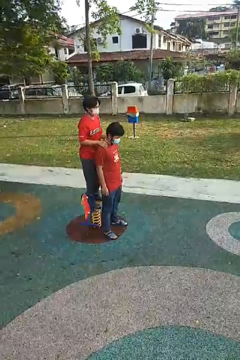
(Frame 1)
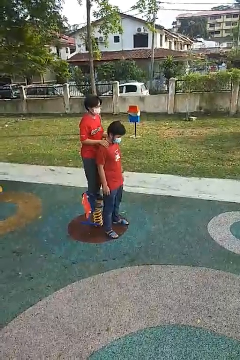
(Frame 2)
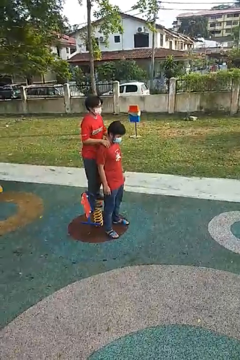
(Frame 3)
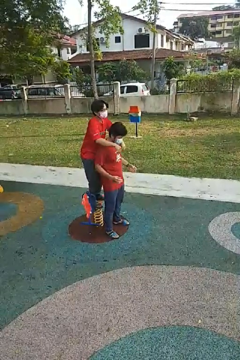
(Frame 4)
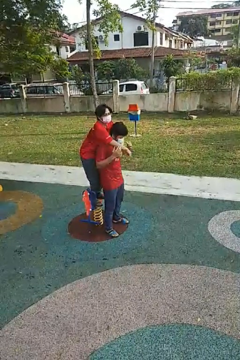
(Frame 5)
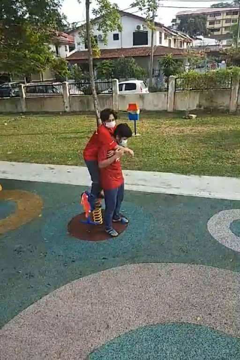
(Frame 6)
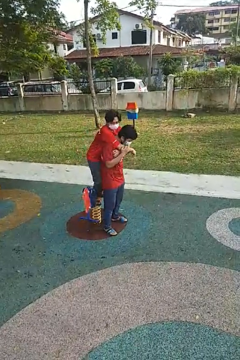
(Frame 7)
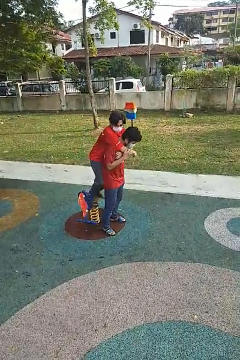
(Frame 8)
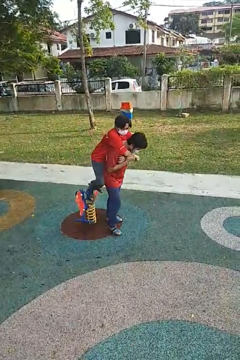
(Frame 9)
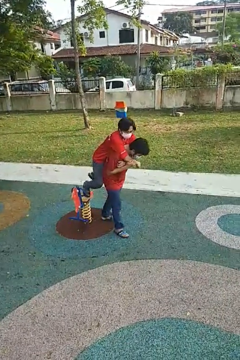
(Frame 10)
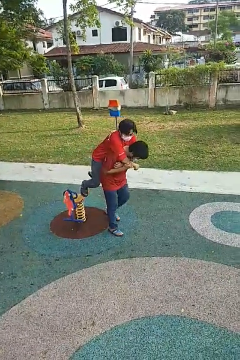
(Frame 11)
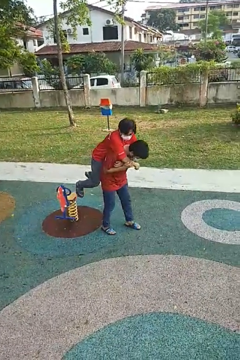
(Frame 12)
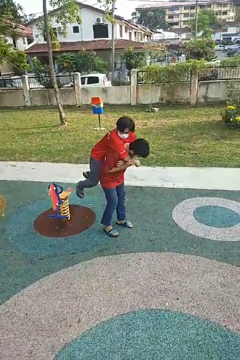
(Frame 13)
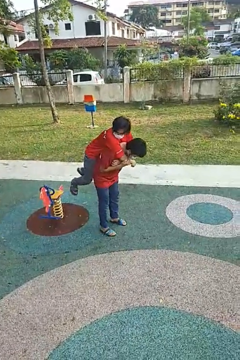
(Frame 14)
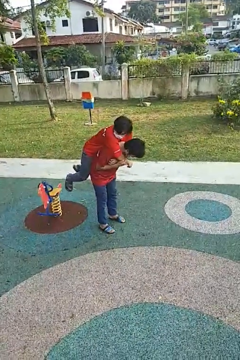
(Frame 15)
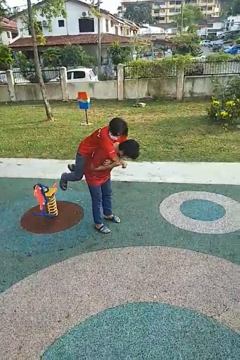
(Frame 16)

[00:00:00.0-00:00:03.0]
person carries person over shoulder

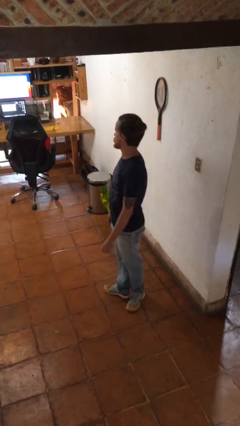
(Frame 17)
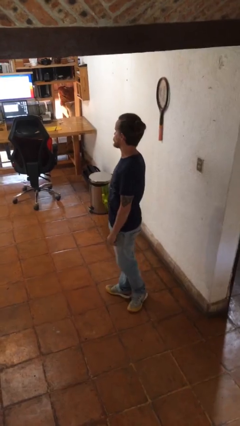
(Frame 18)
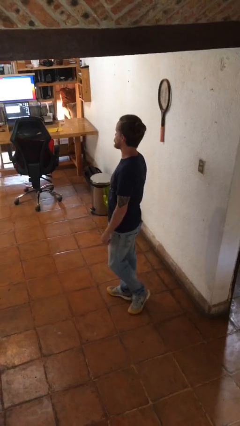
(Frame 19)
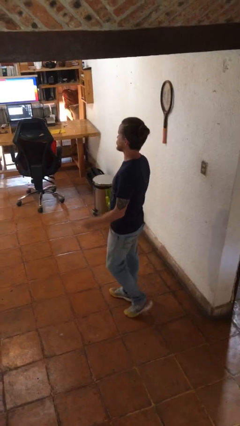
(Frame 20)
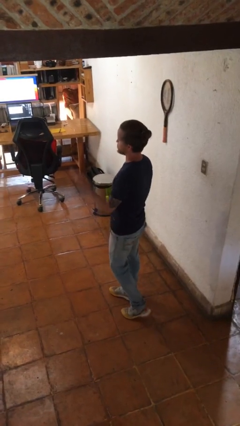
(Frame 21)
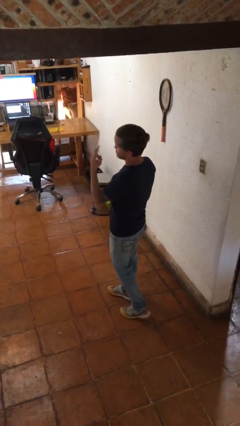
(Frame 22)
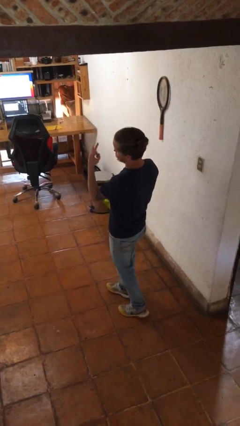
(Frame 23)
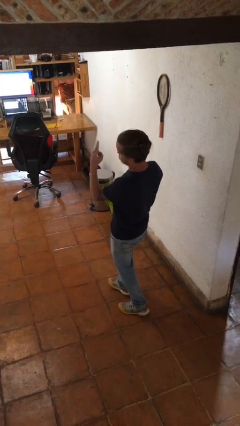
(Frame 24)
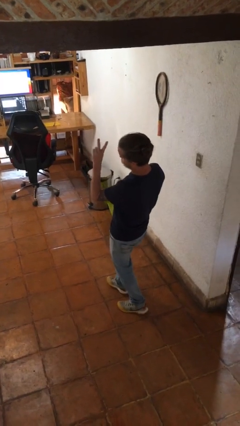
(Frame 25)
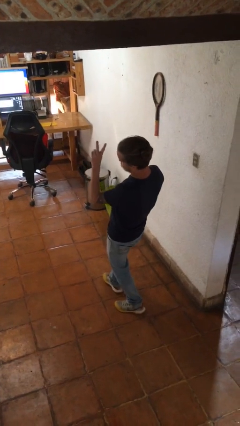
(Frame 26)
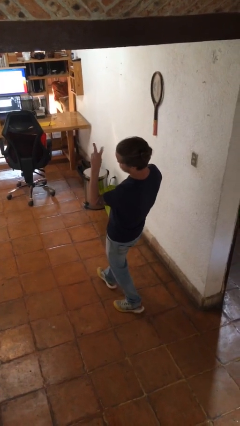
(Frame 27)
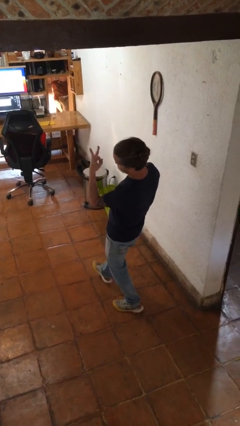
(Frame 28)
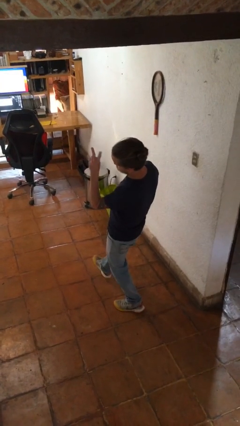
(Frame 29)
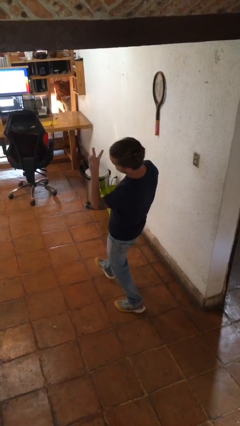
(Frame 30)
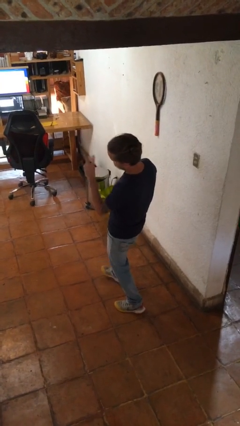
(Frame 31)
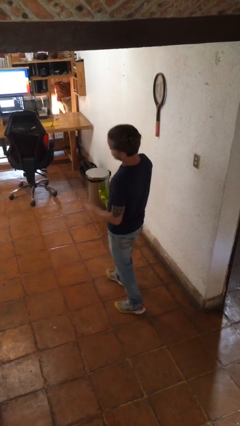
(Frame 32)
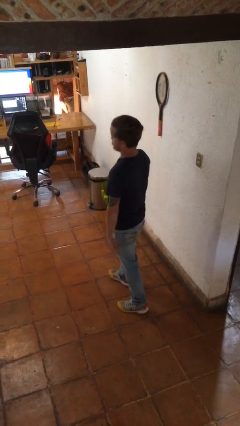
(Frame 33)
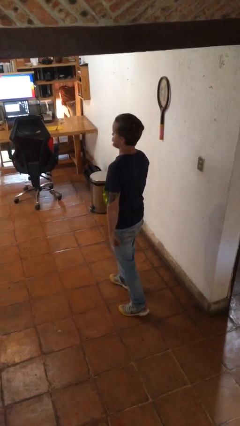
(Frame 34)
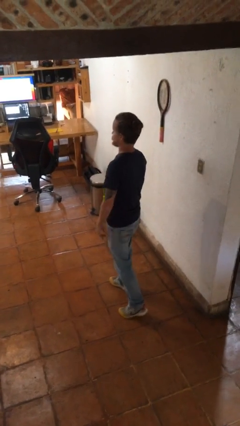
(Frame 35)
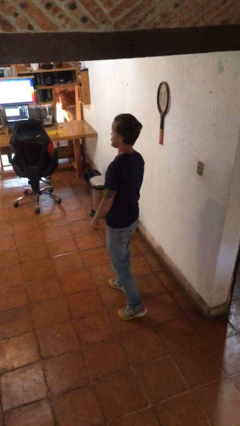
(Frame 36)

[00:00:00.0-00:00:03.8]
person gestures peace

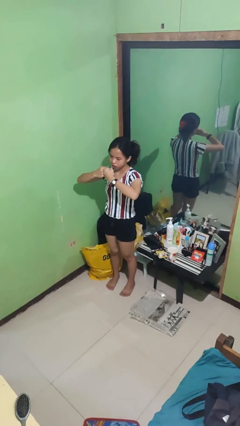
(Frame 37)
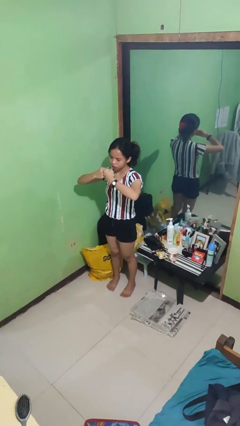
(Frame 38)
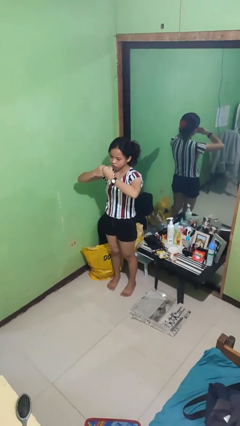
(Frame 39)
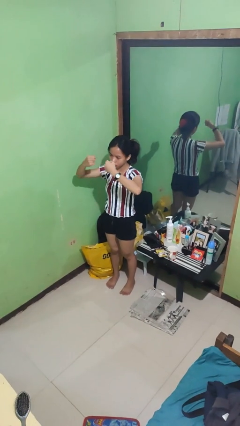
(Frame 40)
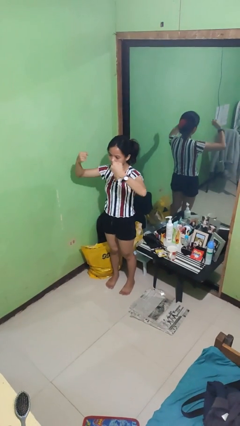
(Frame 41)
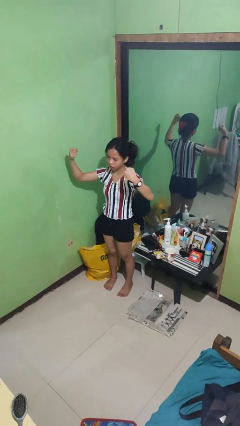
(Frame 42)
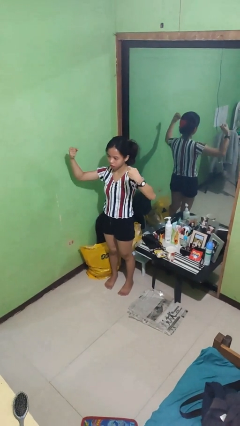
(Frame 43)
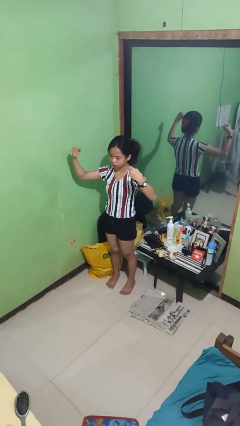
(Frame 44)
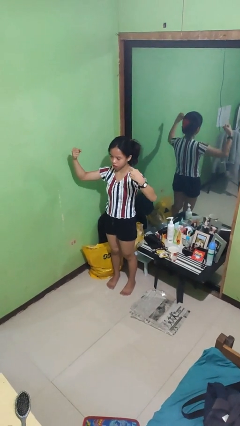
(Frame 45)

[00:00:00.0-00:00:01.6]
person gestures zoom in

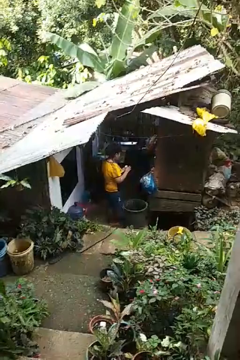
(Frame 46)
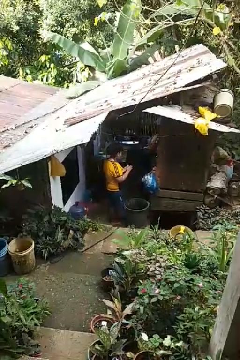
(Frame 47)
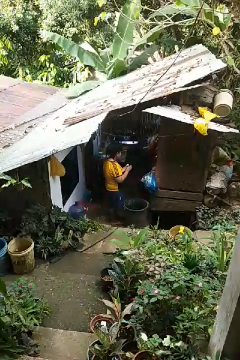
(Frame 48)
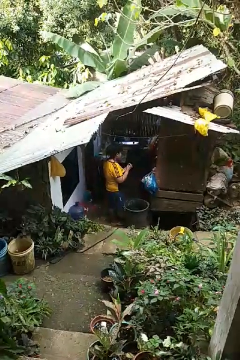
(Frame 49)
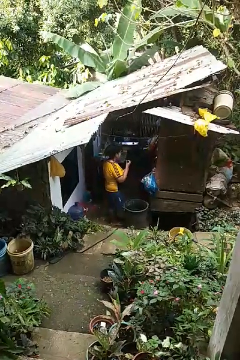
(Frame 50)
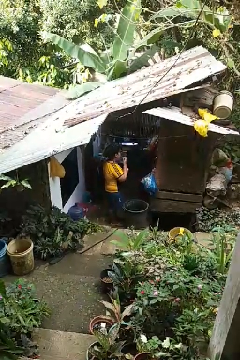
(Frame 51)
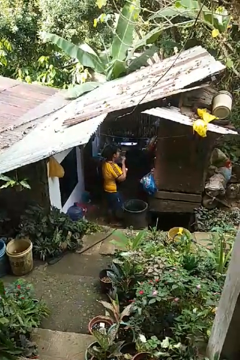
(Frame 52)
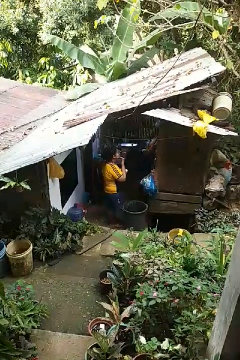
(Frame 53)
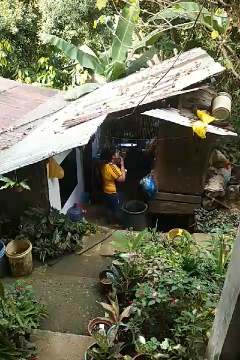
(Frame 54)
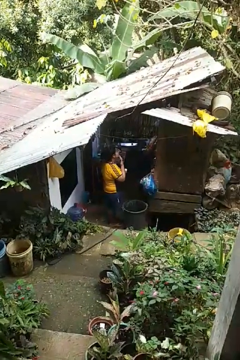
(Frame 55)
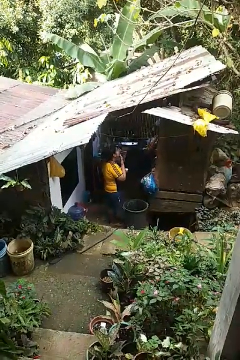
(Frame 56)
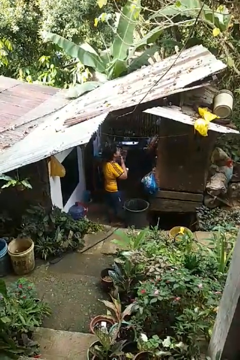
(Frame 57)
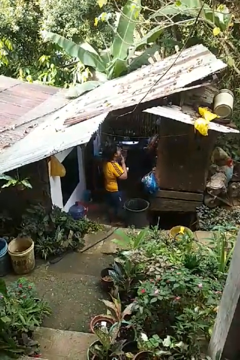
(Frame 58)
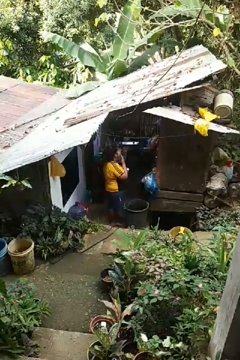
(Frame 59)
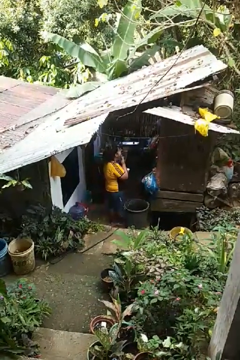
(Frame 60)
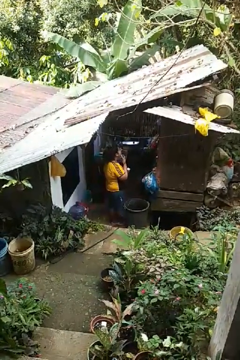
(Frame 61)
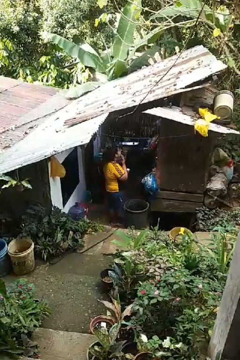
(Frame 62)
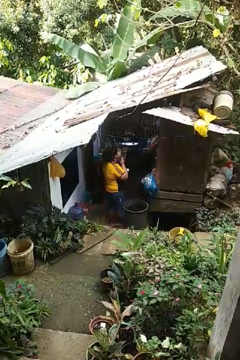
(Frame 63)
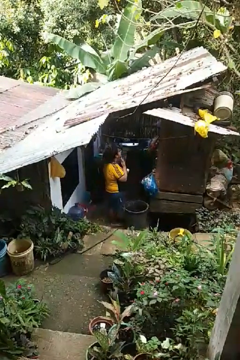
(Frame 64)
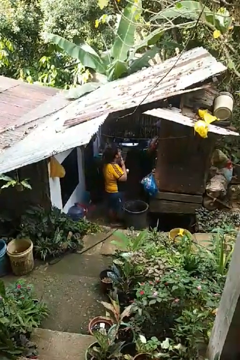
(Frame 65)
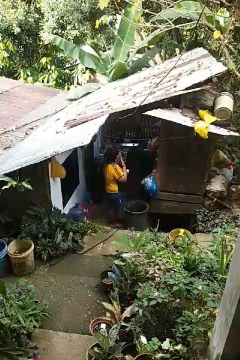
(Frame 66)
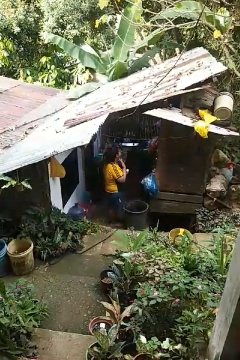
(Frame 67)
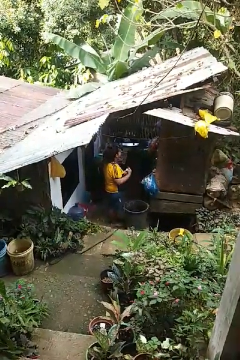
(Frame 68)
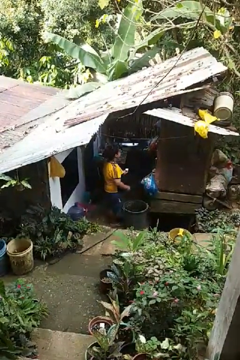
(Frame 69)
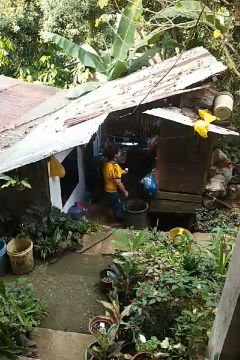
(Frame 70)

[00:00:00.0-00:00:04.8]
person applies facial moisturizer

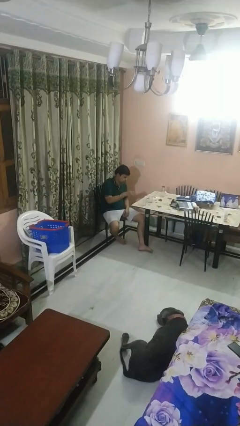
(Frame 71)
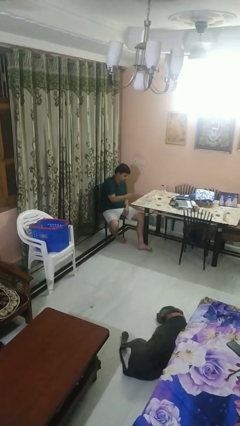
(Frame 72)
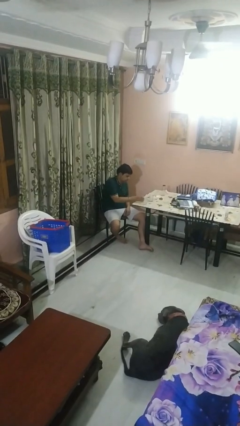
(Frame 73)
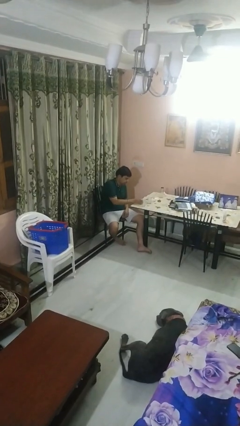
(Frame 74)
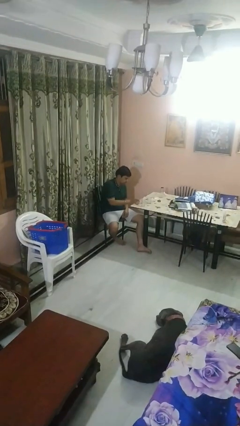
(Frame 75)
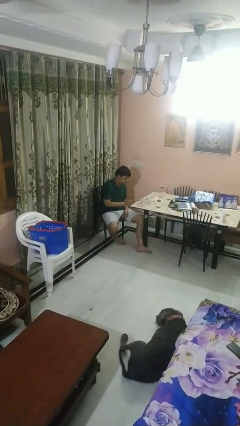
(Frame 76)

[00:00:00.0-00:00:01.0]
person puts down object on table

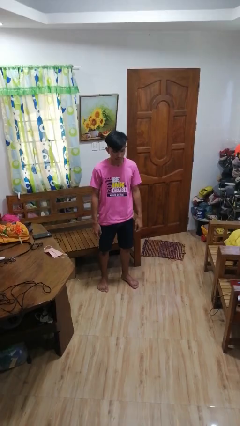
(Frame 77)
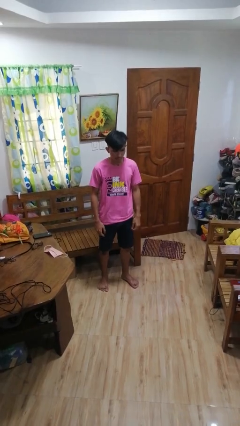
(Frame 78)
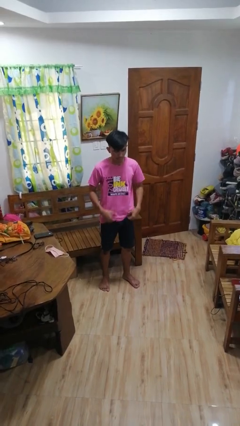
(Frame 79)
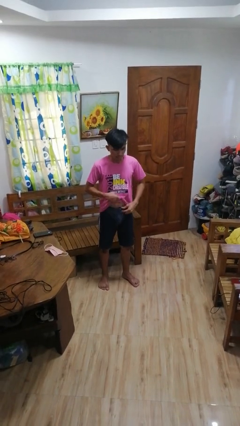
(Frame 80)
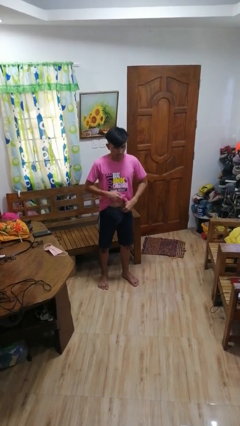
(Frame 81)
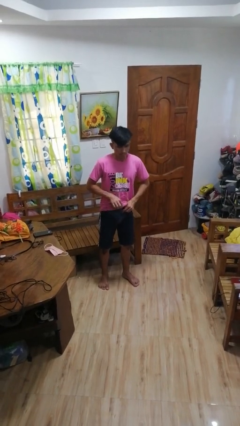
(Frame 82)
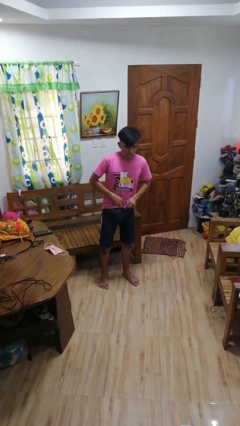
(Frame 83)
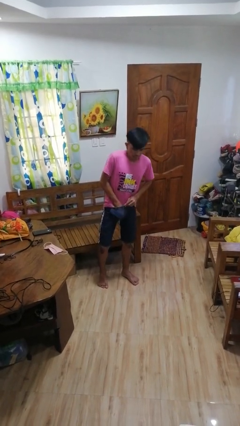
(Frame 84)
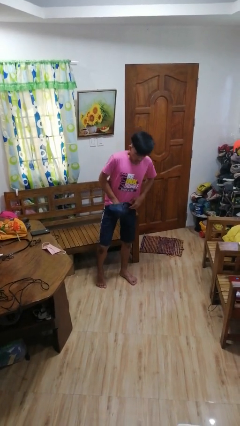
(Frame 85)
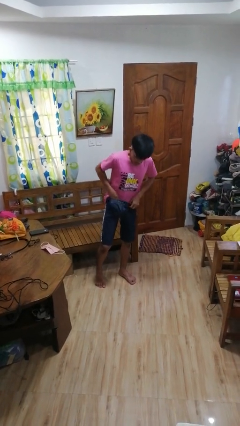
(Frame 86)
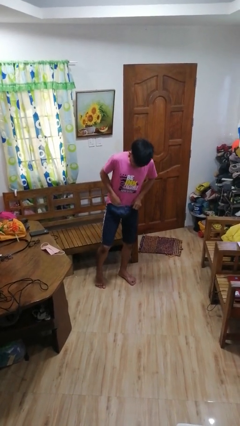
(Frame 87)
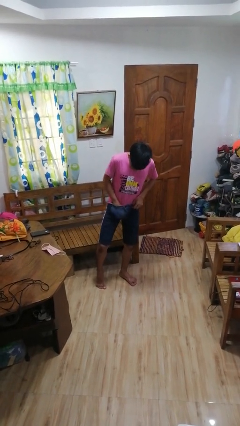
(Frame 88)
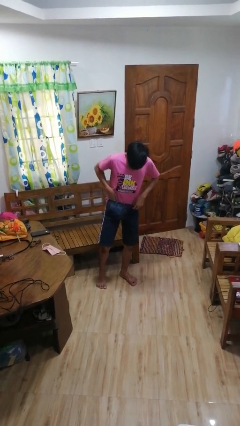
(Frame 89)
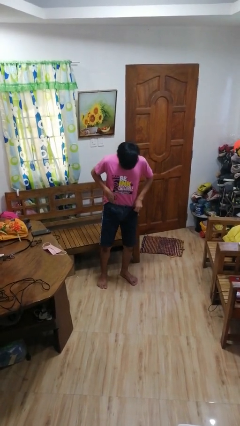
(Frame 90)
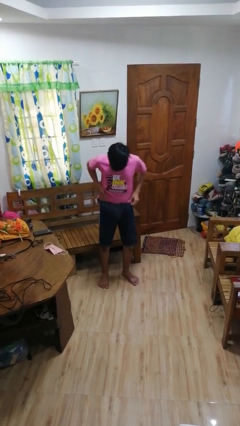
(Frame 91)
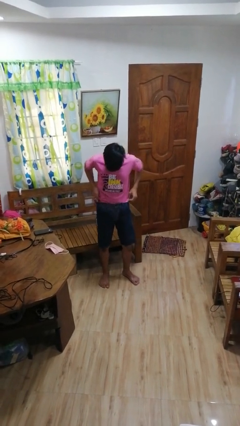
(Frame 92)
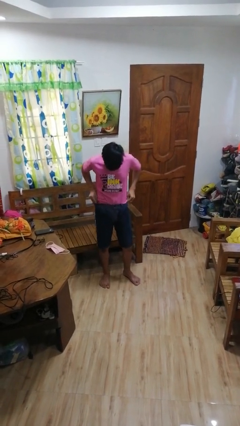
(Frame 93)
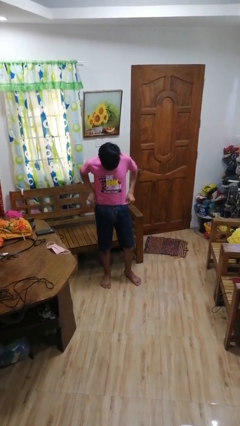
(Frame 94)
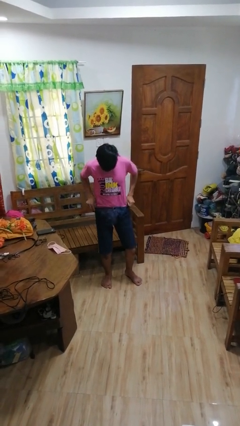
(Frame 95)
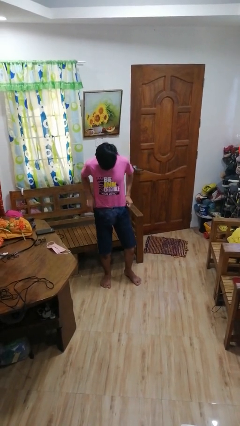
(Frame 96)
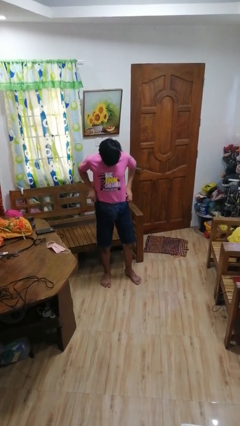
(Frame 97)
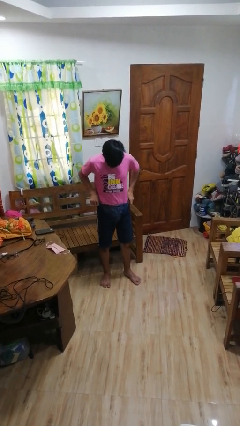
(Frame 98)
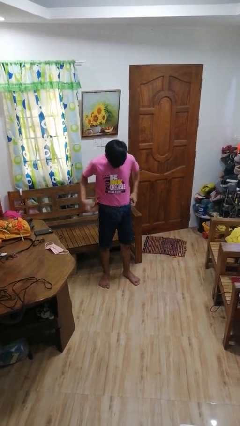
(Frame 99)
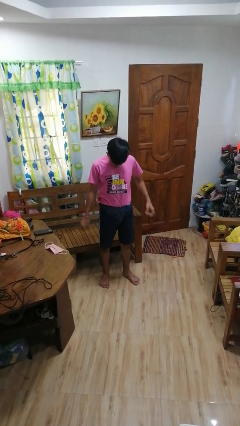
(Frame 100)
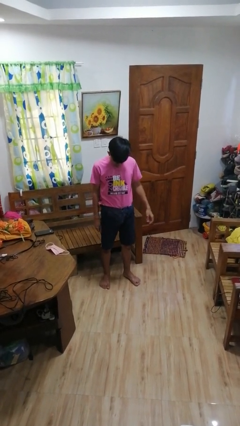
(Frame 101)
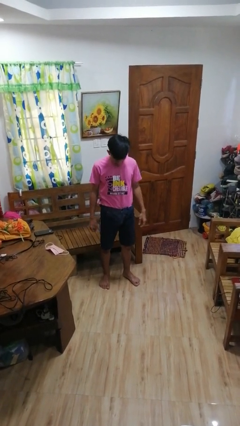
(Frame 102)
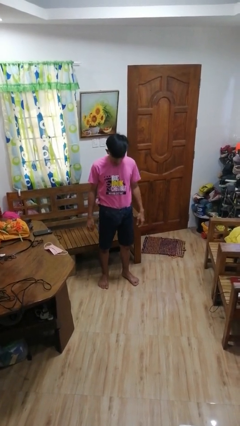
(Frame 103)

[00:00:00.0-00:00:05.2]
person tucks in shirt
